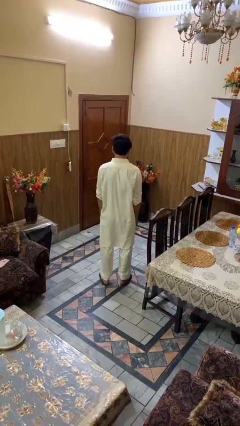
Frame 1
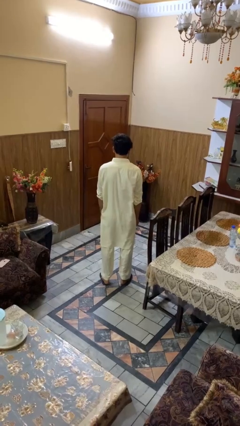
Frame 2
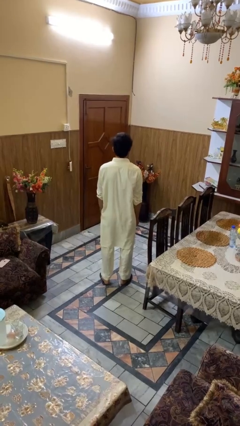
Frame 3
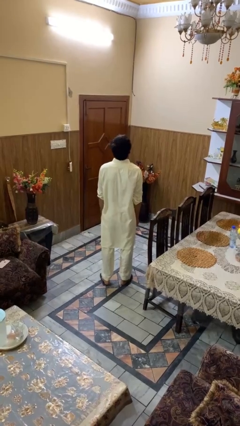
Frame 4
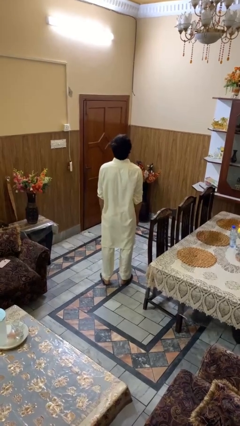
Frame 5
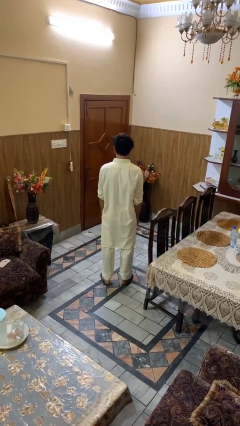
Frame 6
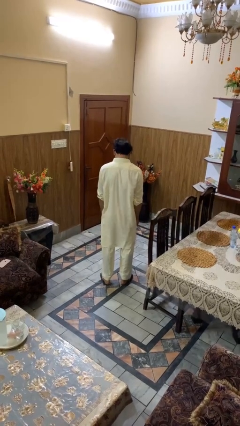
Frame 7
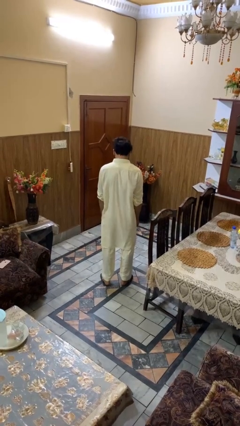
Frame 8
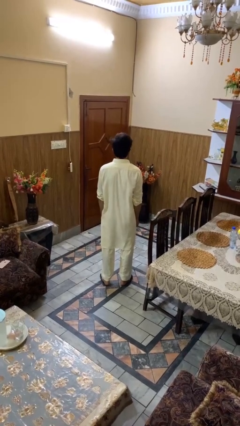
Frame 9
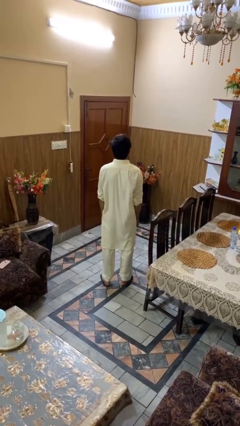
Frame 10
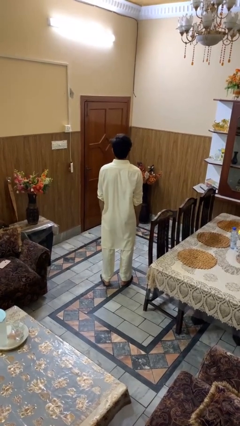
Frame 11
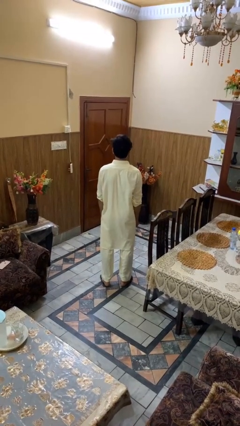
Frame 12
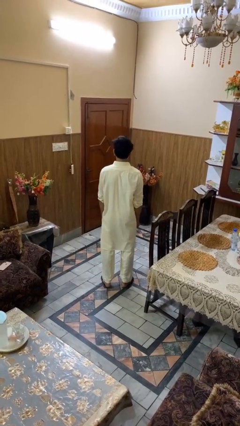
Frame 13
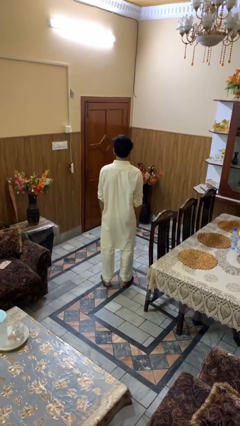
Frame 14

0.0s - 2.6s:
person nods head

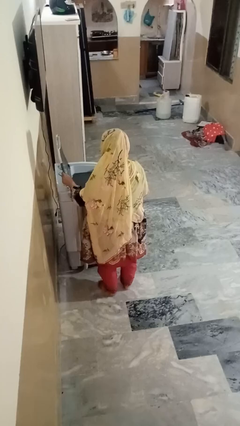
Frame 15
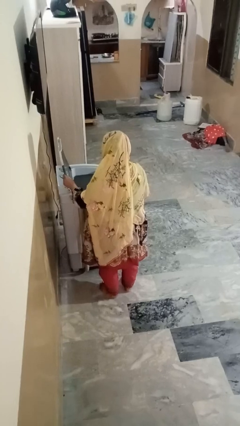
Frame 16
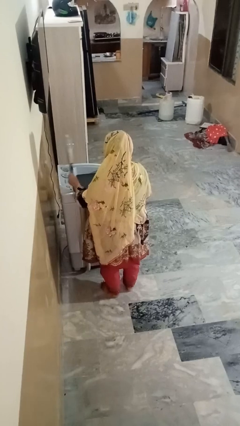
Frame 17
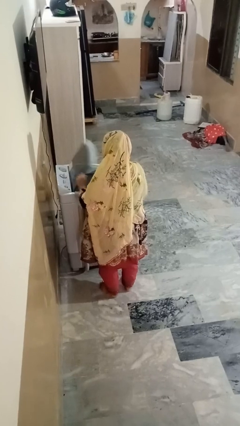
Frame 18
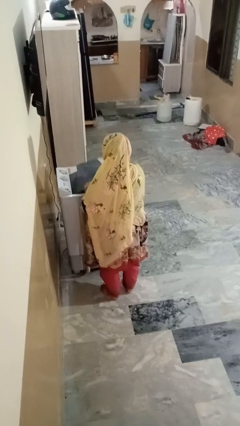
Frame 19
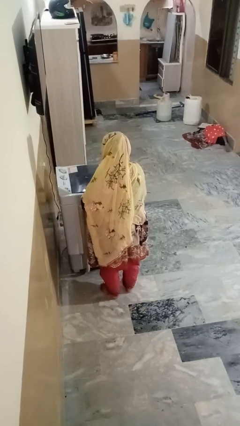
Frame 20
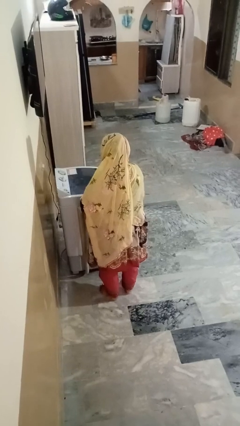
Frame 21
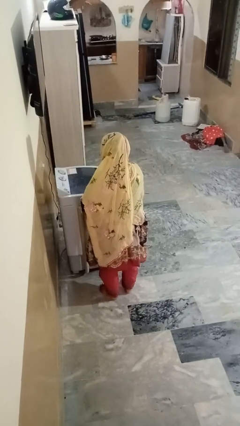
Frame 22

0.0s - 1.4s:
person closes clothes washer

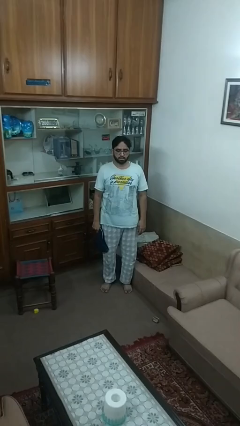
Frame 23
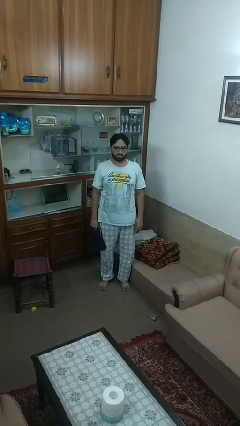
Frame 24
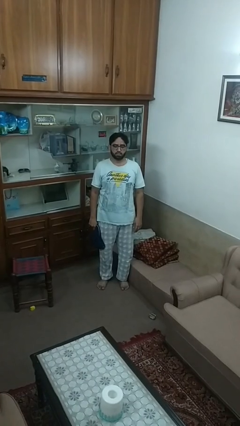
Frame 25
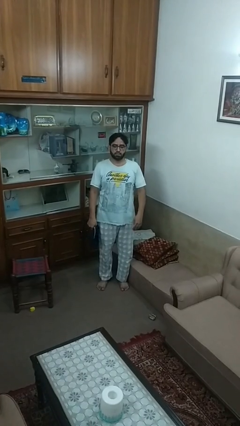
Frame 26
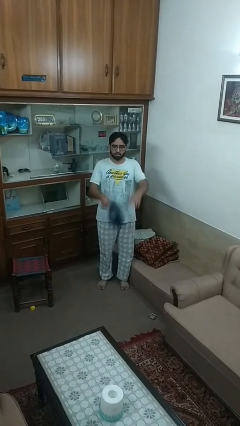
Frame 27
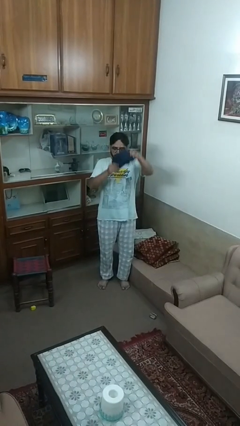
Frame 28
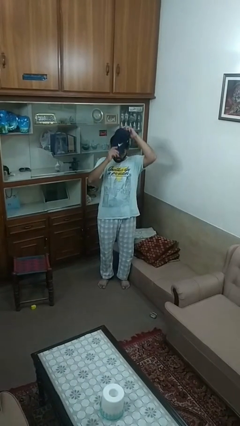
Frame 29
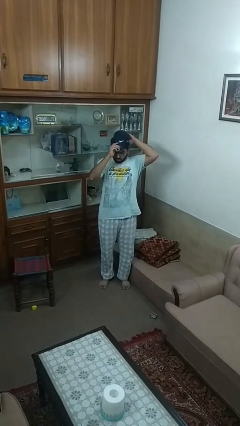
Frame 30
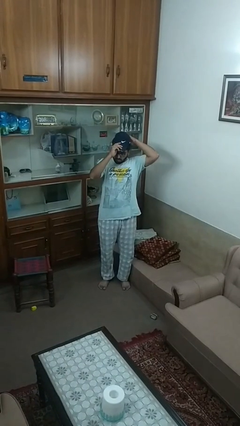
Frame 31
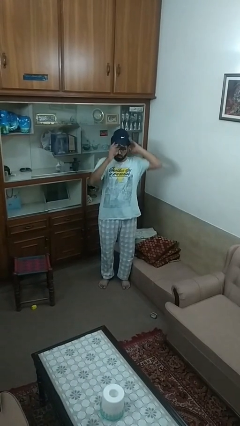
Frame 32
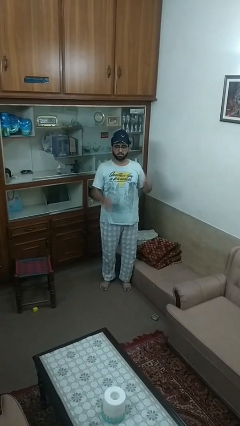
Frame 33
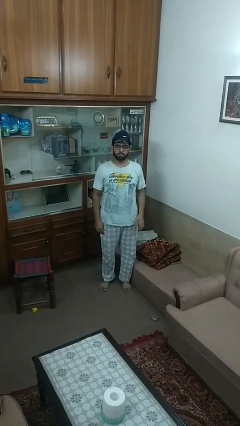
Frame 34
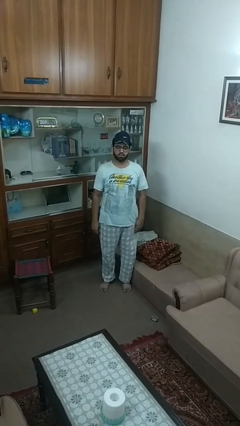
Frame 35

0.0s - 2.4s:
person puts on hat

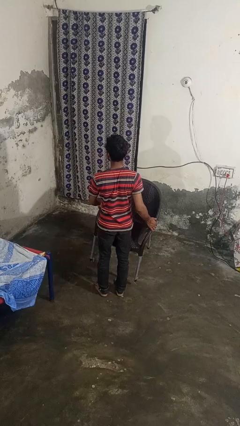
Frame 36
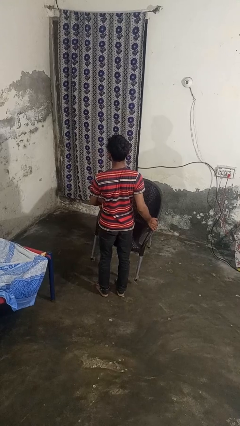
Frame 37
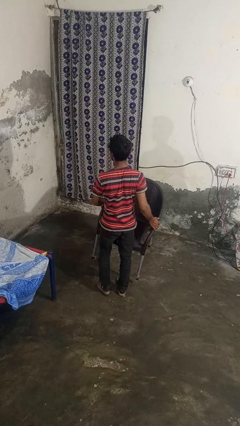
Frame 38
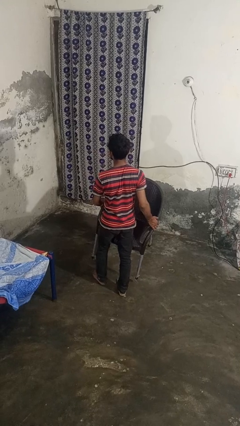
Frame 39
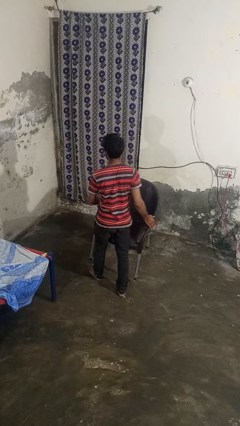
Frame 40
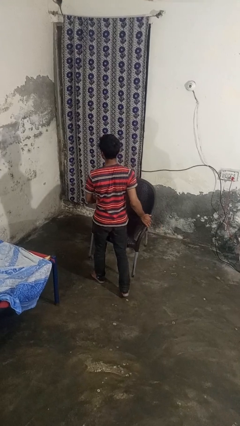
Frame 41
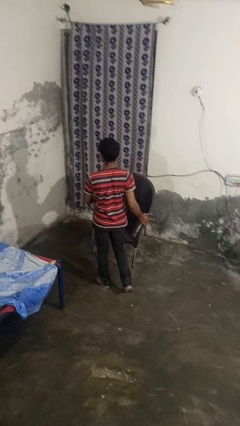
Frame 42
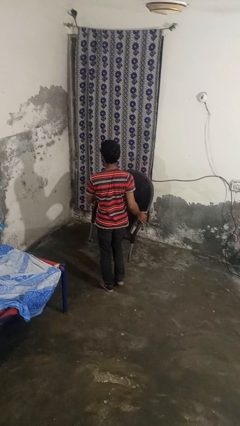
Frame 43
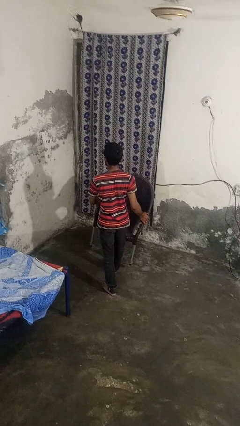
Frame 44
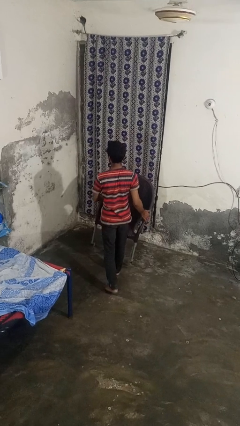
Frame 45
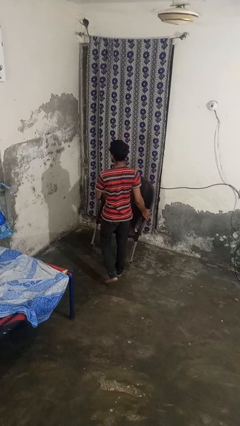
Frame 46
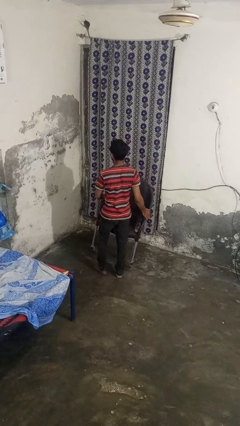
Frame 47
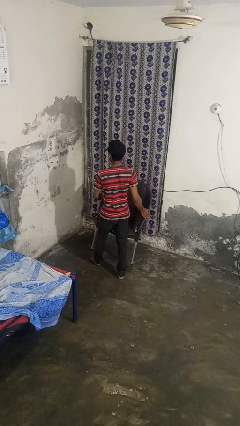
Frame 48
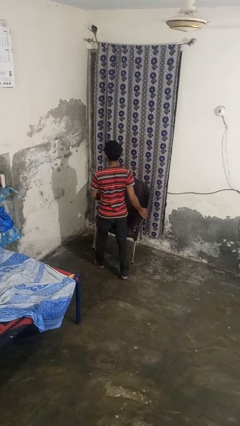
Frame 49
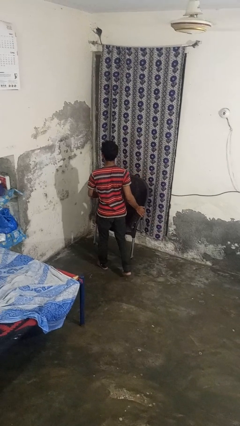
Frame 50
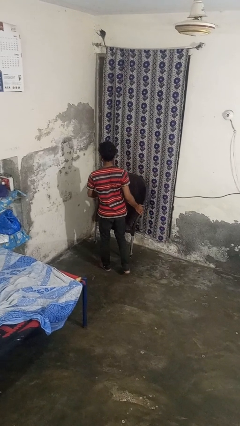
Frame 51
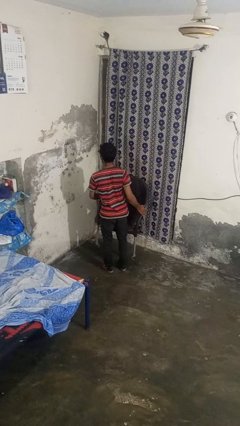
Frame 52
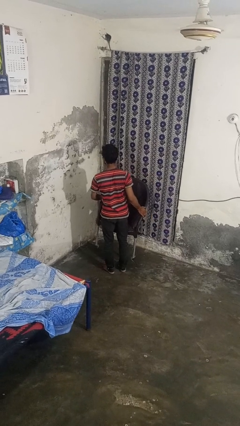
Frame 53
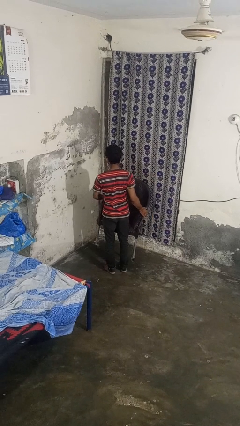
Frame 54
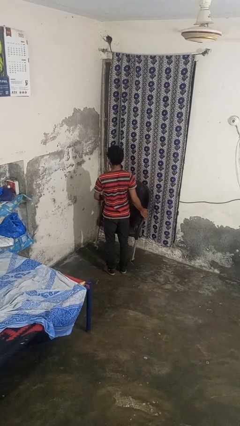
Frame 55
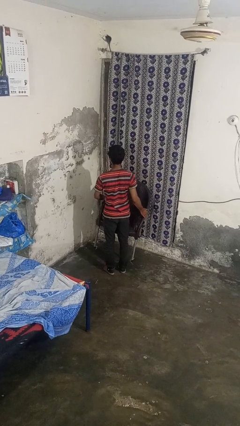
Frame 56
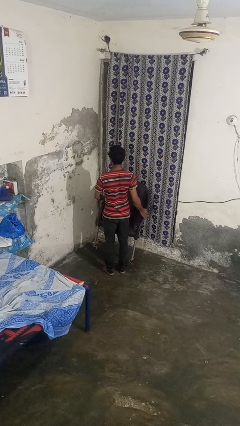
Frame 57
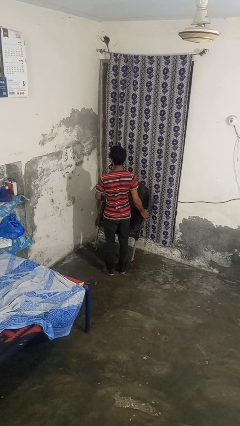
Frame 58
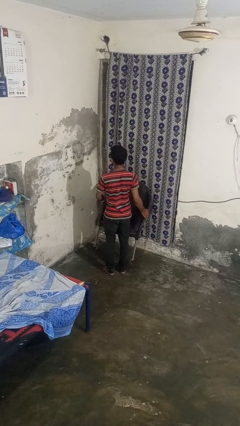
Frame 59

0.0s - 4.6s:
person carries furniture

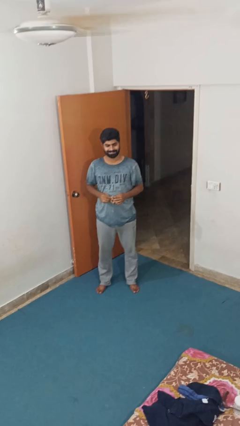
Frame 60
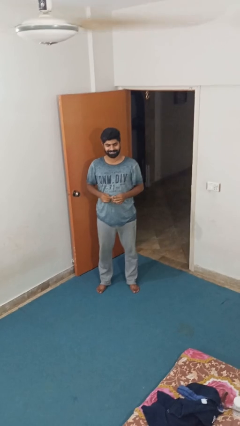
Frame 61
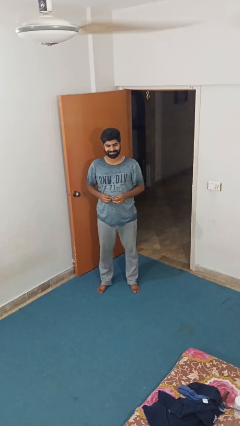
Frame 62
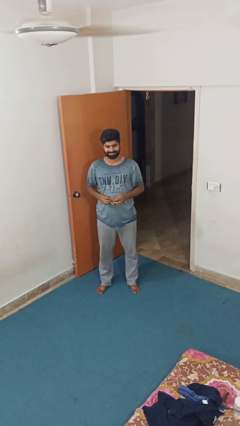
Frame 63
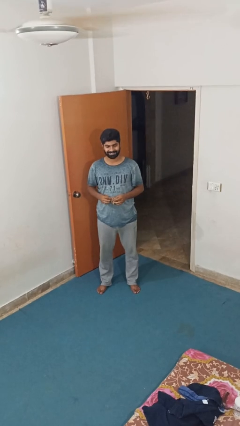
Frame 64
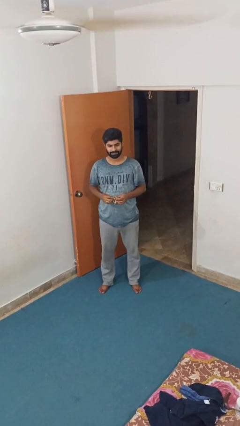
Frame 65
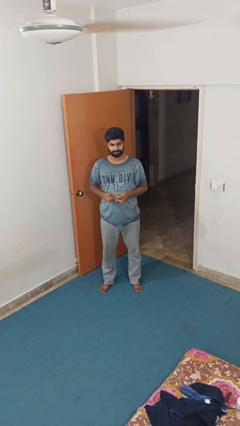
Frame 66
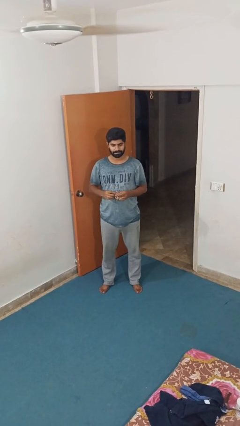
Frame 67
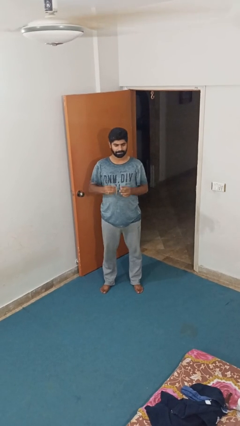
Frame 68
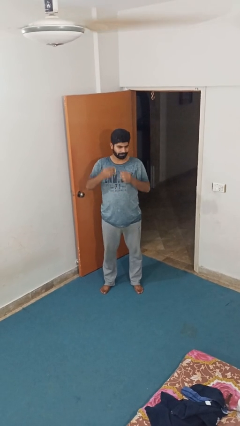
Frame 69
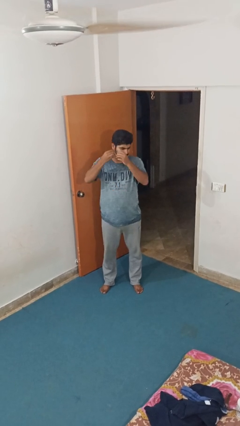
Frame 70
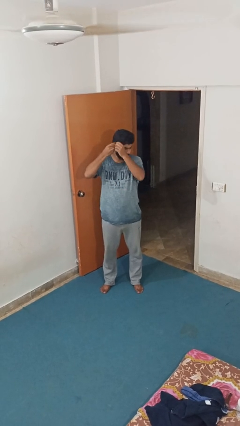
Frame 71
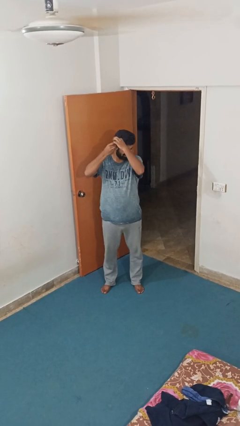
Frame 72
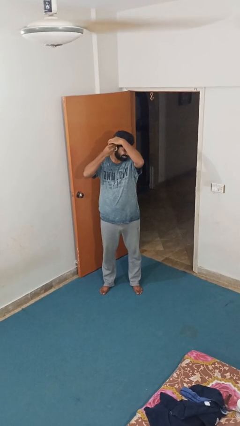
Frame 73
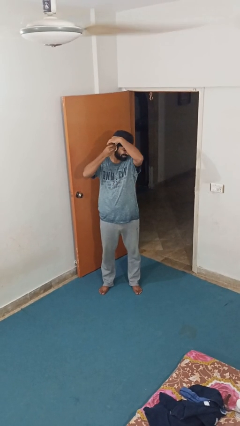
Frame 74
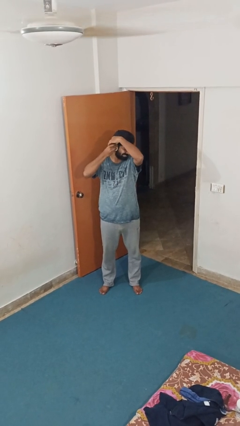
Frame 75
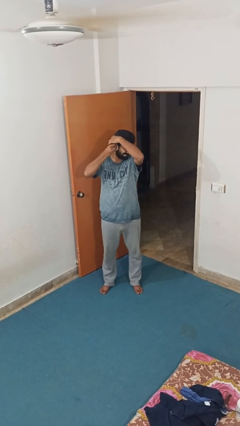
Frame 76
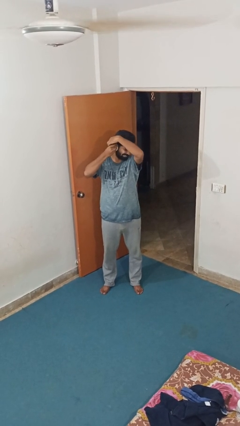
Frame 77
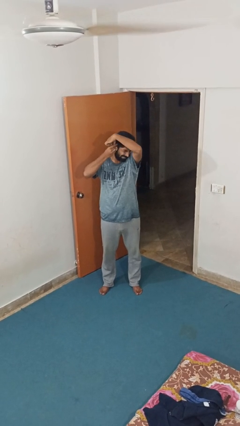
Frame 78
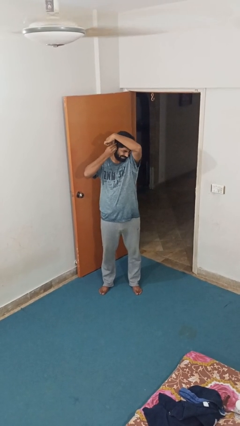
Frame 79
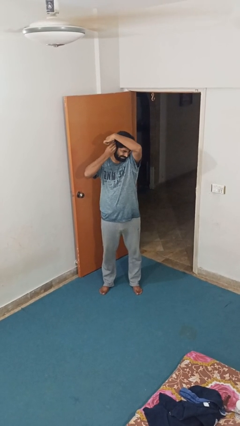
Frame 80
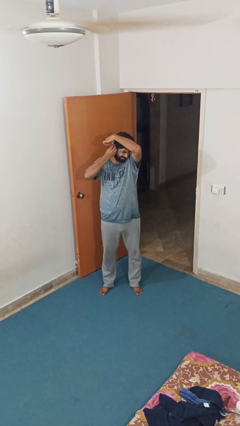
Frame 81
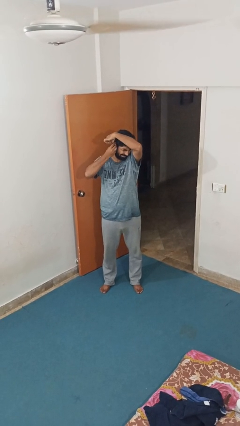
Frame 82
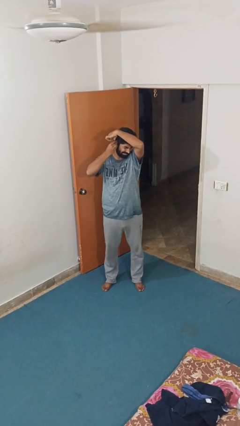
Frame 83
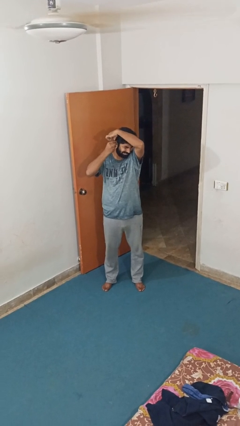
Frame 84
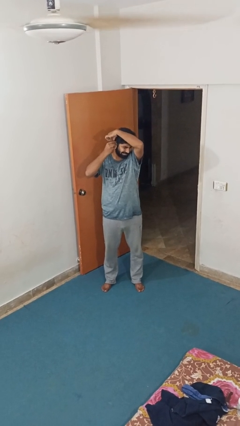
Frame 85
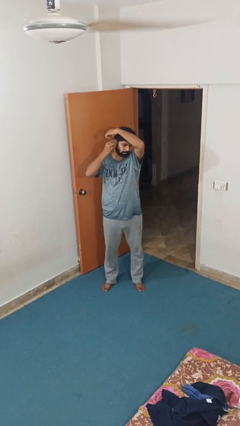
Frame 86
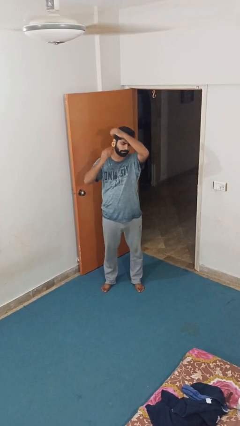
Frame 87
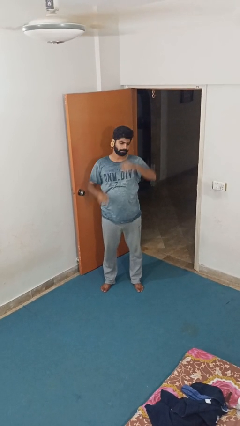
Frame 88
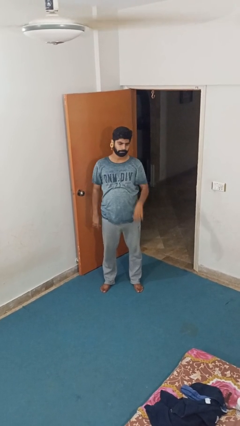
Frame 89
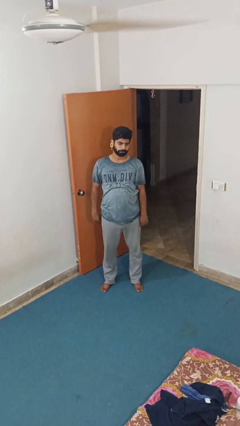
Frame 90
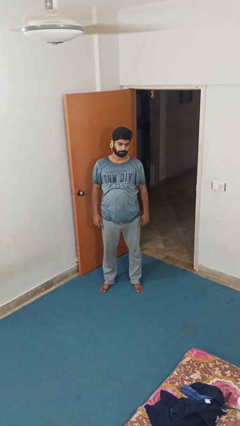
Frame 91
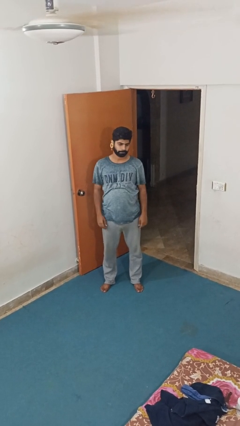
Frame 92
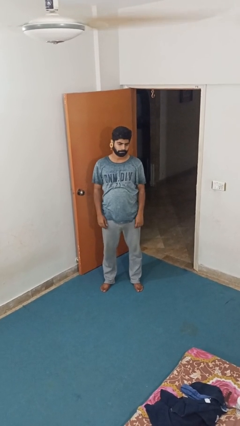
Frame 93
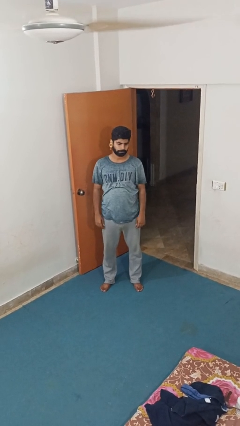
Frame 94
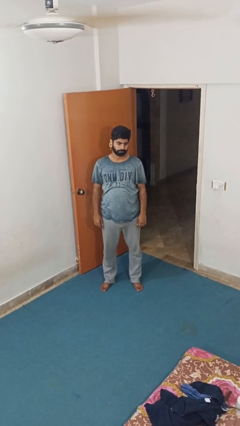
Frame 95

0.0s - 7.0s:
person puts on earrings
